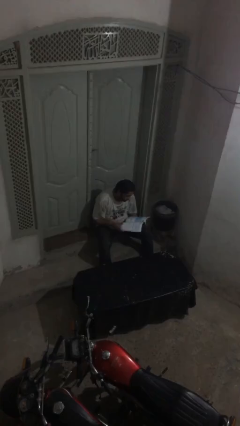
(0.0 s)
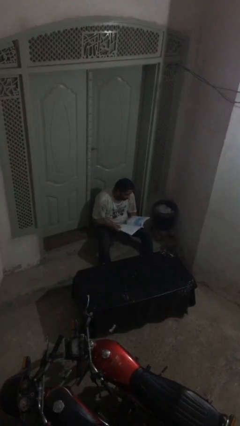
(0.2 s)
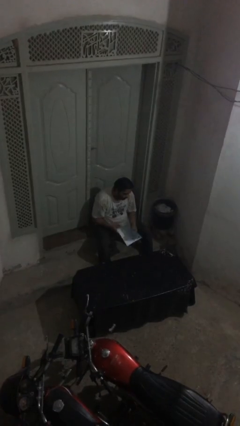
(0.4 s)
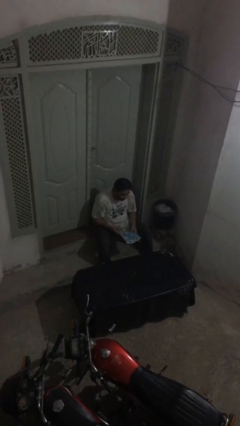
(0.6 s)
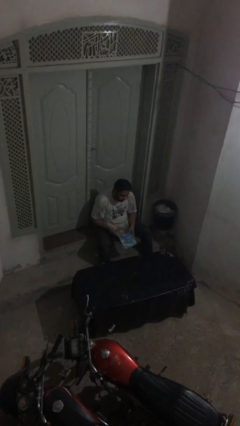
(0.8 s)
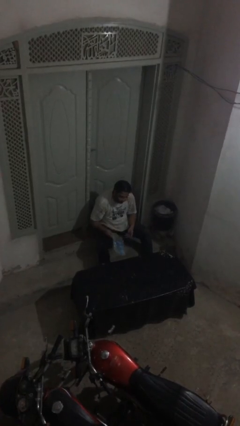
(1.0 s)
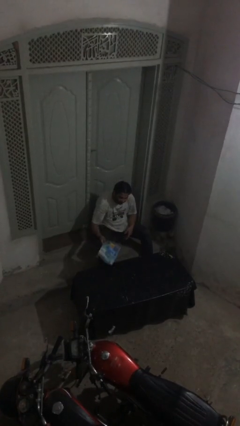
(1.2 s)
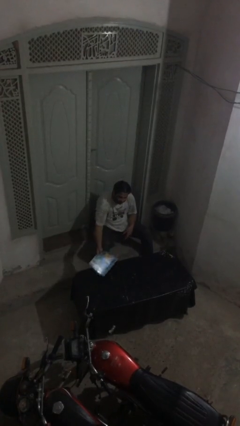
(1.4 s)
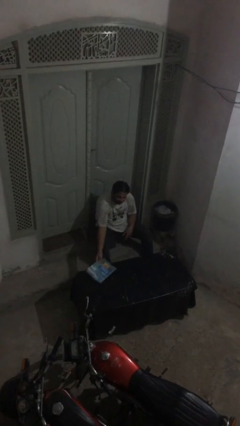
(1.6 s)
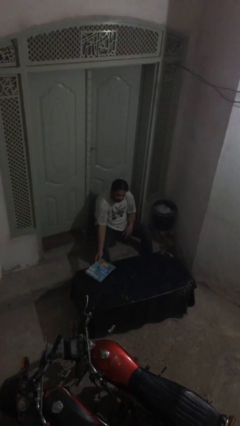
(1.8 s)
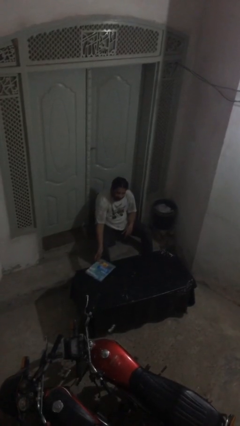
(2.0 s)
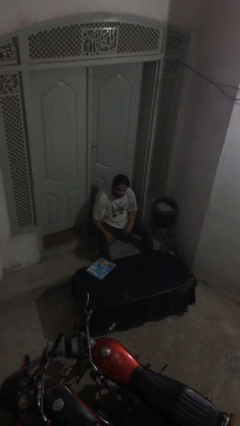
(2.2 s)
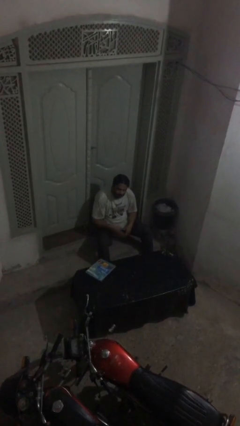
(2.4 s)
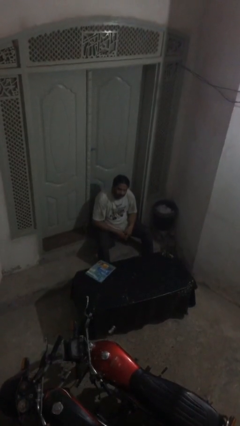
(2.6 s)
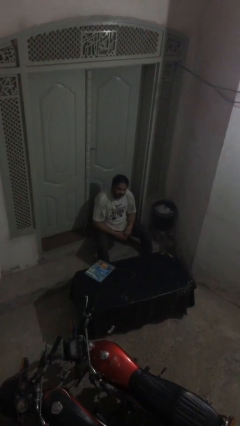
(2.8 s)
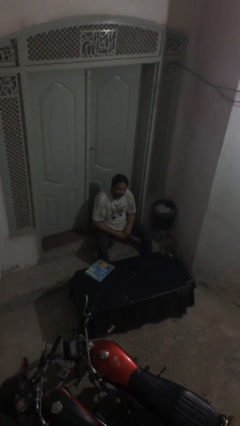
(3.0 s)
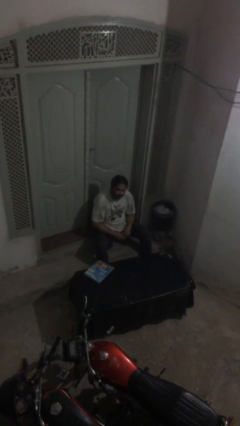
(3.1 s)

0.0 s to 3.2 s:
person puts down object on table

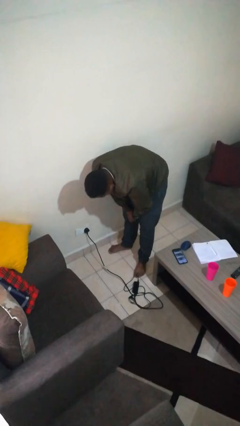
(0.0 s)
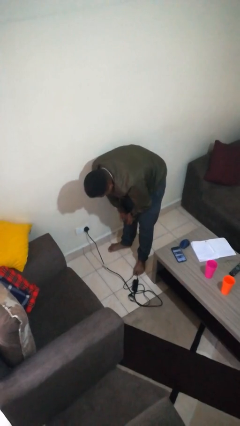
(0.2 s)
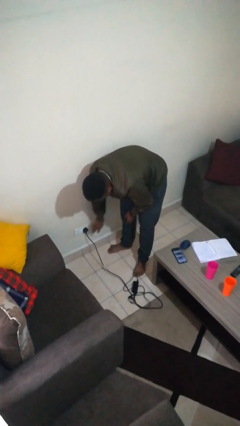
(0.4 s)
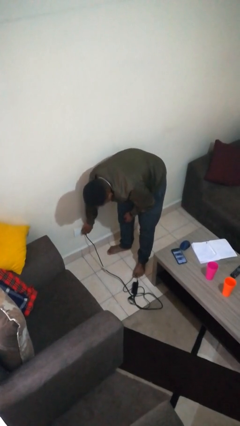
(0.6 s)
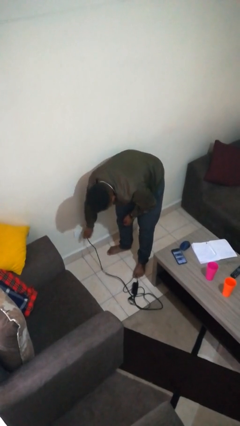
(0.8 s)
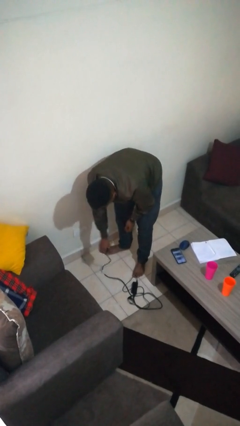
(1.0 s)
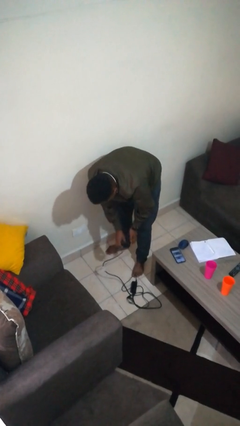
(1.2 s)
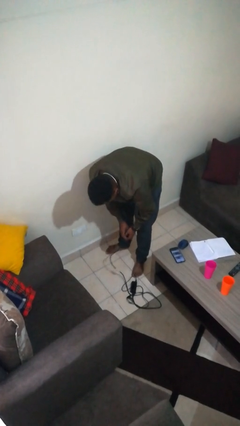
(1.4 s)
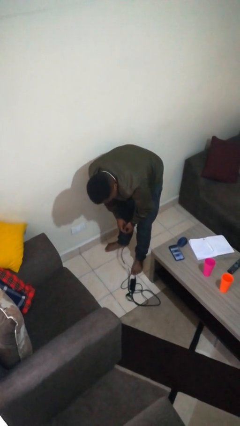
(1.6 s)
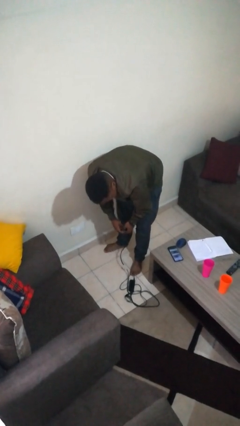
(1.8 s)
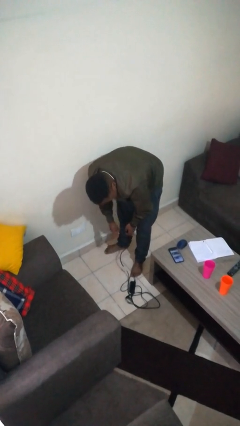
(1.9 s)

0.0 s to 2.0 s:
person unplugs from electrical socket

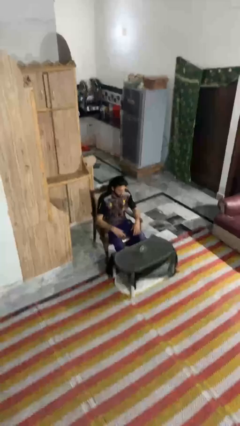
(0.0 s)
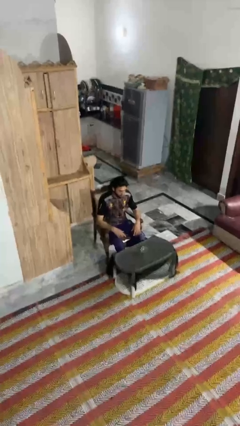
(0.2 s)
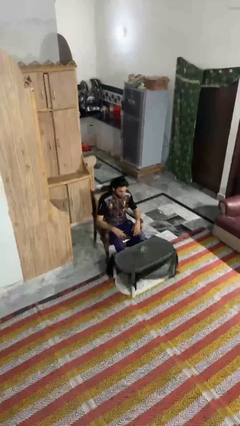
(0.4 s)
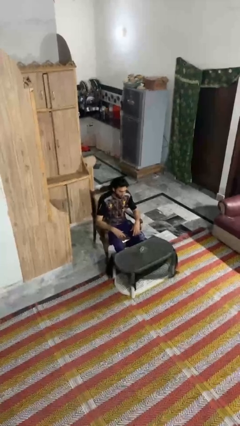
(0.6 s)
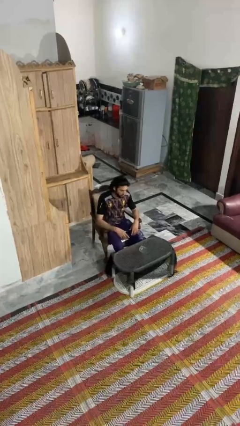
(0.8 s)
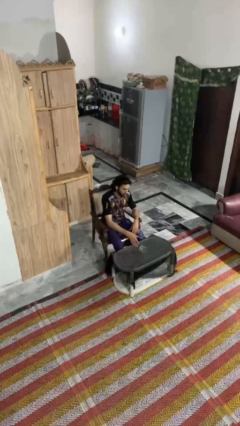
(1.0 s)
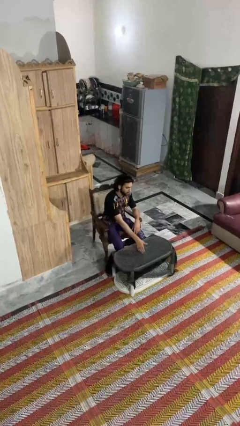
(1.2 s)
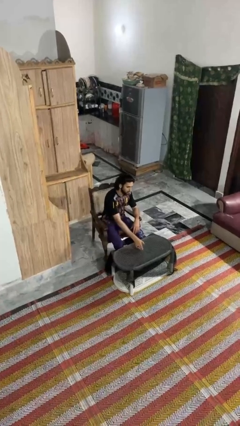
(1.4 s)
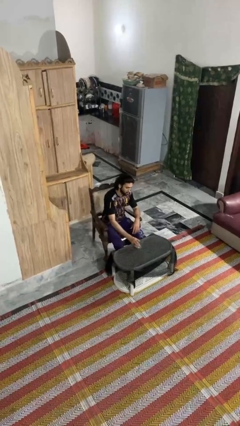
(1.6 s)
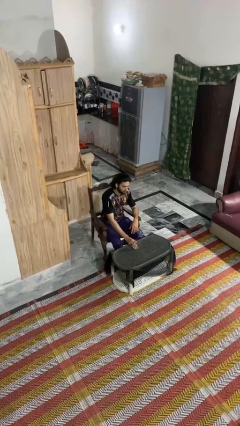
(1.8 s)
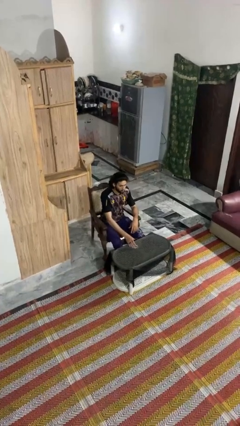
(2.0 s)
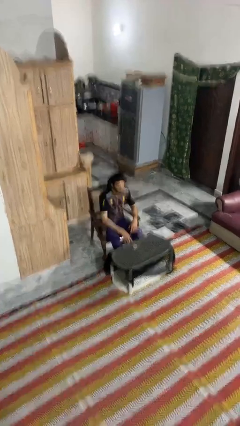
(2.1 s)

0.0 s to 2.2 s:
person sets upright glass

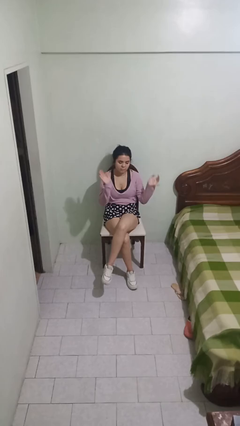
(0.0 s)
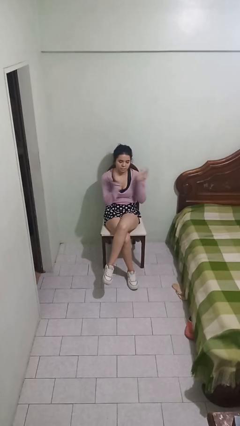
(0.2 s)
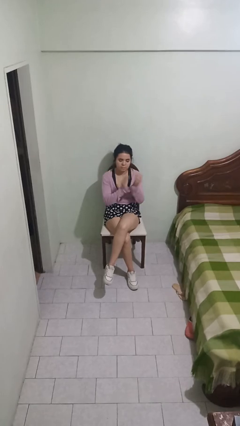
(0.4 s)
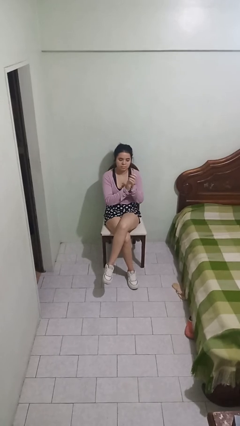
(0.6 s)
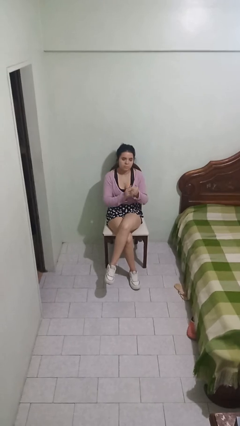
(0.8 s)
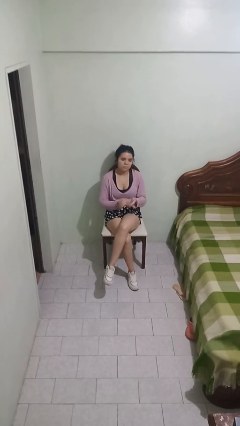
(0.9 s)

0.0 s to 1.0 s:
person claps hands

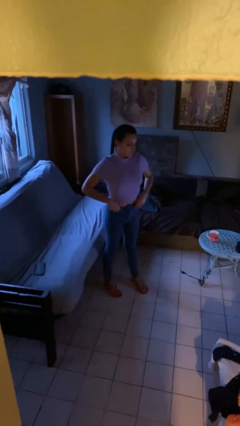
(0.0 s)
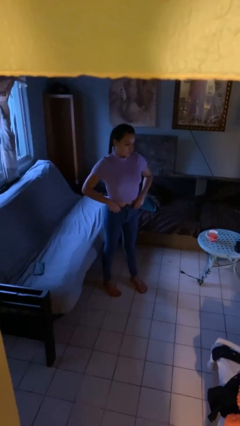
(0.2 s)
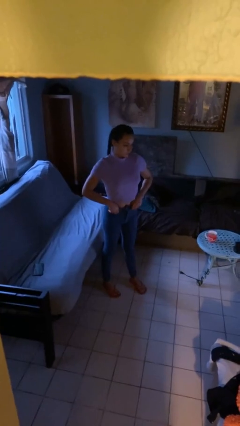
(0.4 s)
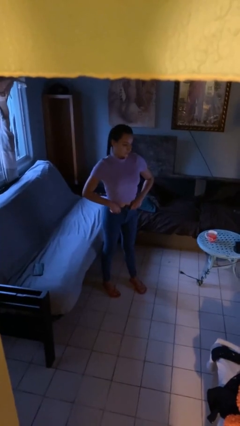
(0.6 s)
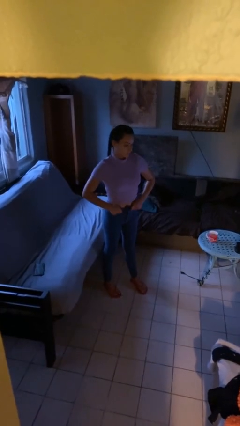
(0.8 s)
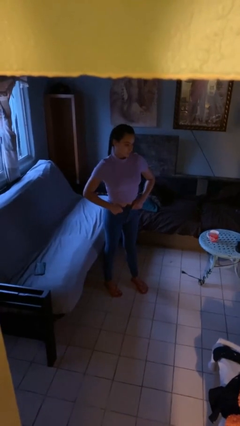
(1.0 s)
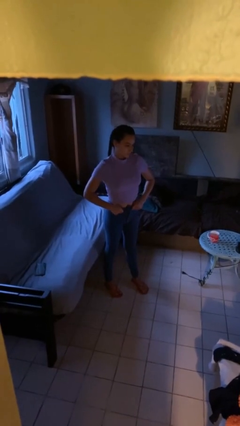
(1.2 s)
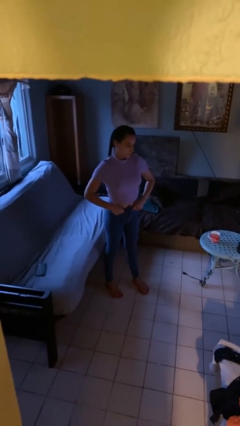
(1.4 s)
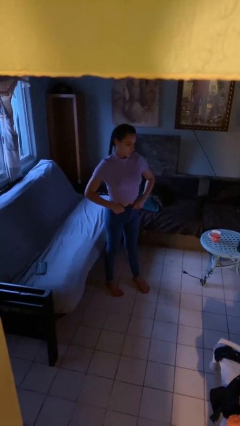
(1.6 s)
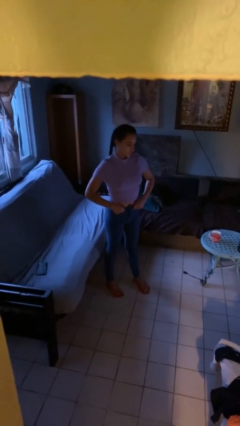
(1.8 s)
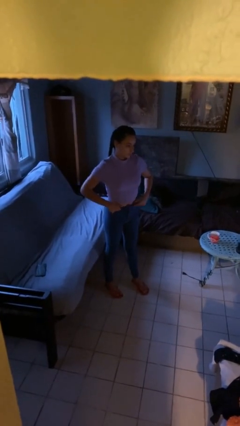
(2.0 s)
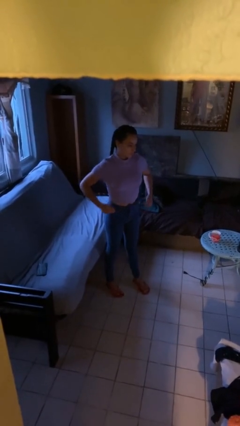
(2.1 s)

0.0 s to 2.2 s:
person puts hands in back pockets

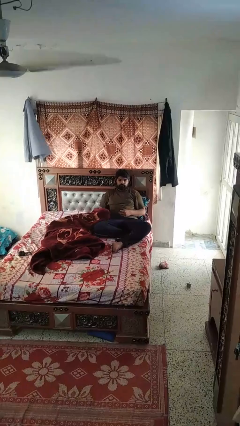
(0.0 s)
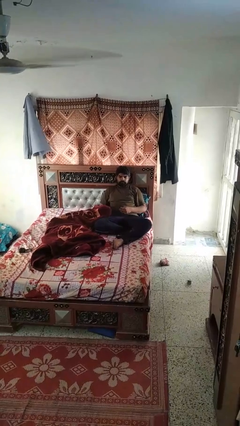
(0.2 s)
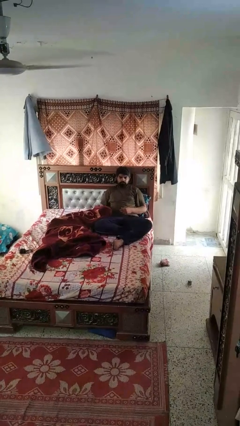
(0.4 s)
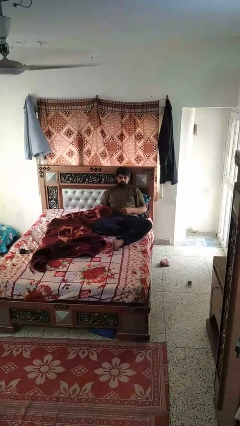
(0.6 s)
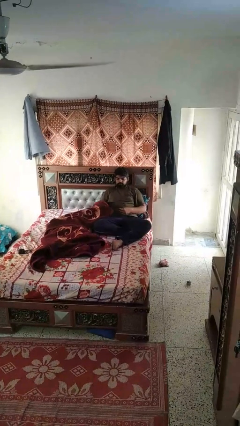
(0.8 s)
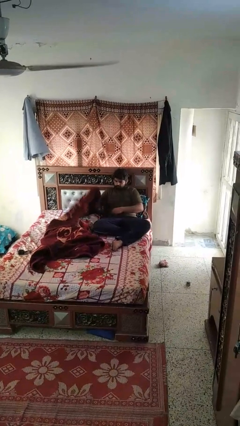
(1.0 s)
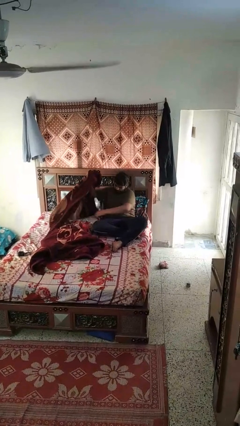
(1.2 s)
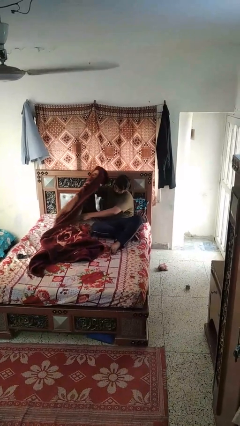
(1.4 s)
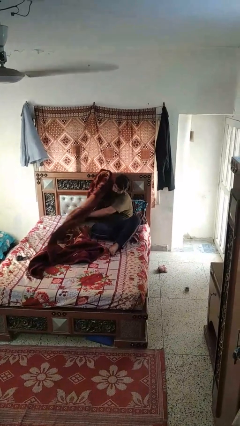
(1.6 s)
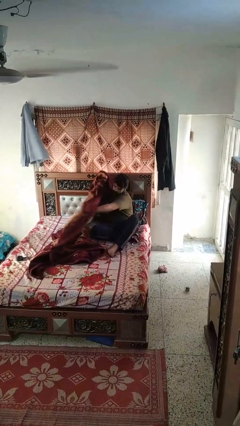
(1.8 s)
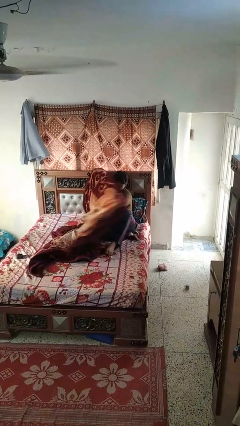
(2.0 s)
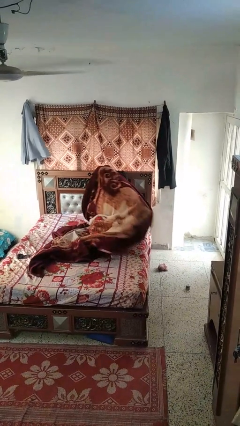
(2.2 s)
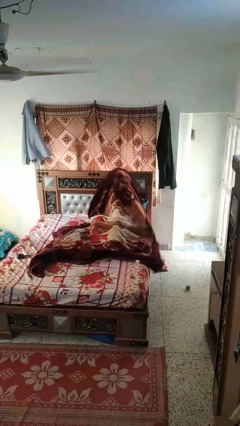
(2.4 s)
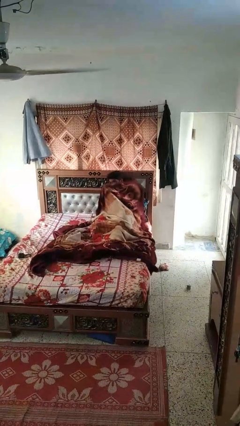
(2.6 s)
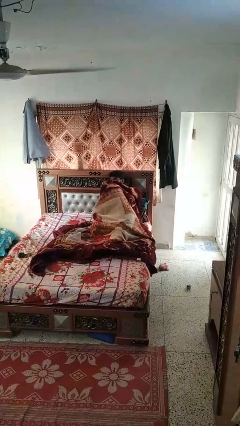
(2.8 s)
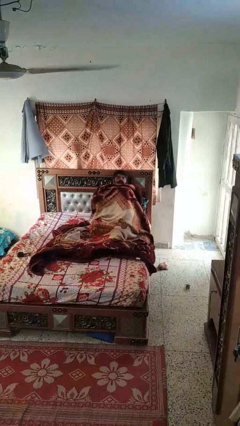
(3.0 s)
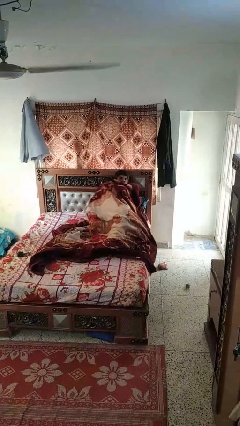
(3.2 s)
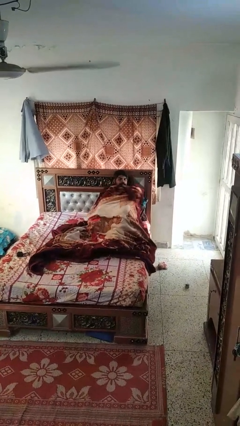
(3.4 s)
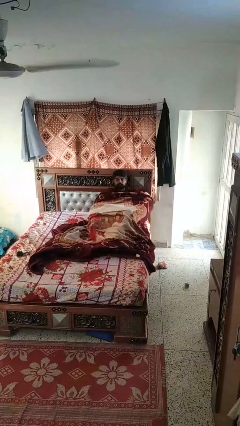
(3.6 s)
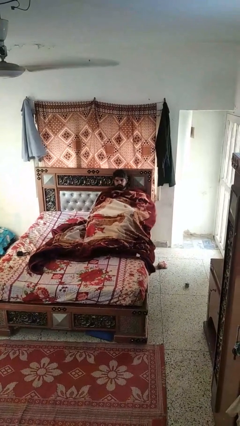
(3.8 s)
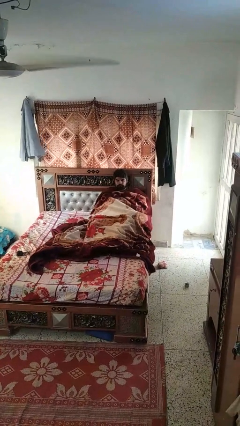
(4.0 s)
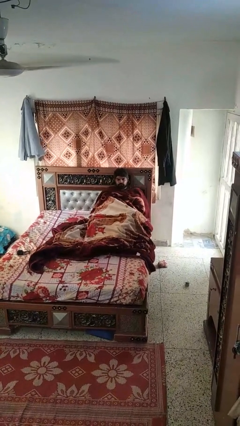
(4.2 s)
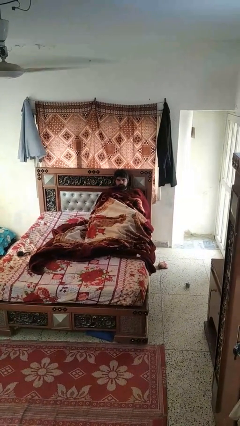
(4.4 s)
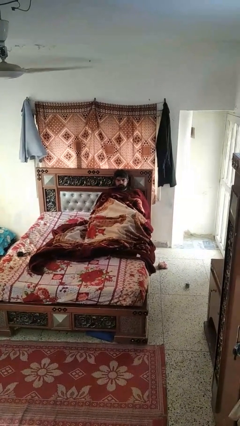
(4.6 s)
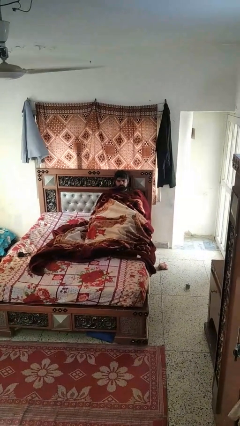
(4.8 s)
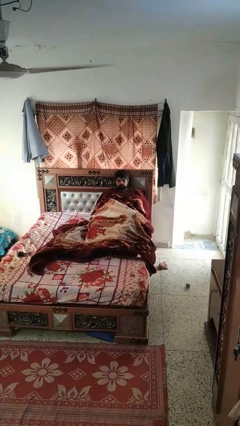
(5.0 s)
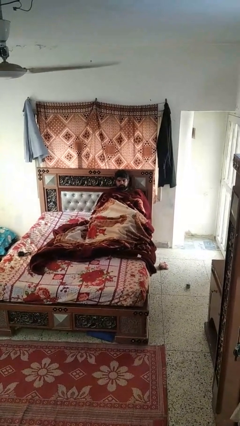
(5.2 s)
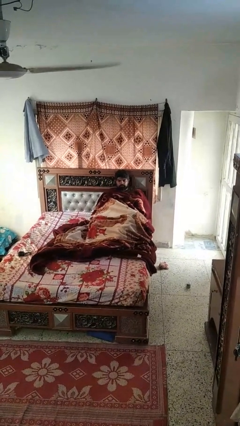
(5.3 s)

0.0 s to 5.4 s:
person covers with blanket

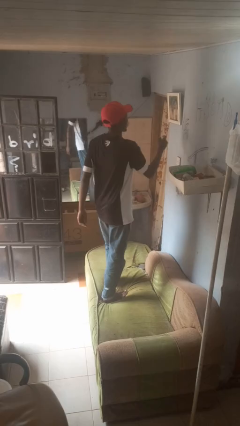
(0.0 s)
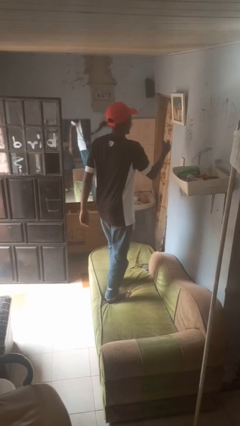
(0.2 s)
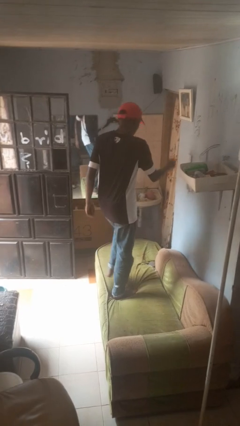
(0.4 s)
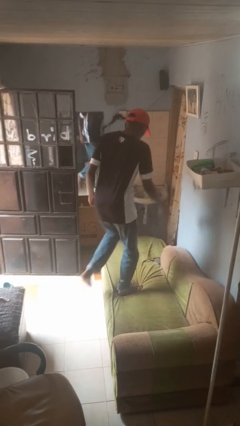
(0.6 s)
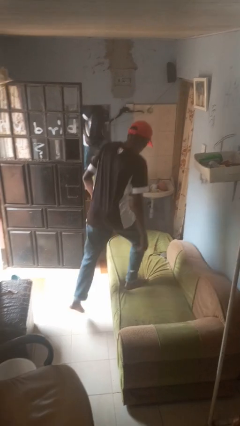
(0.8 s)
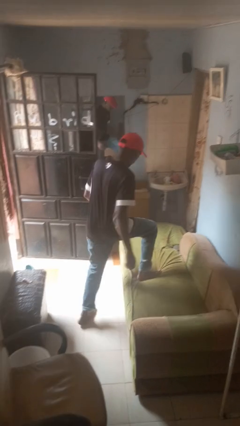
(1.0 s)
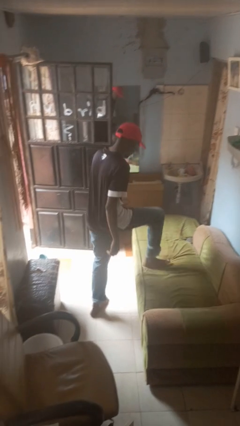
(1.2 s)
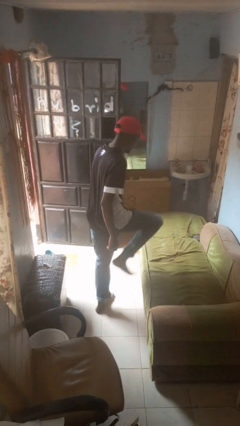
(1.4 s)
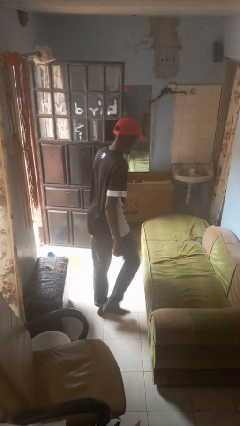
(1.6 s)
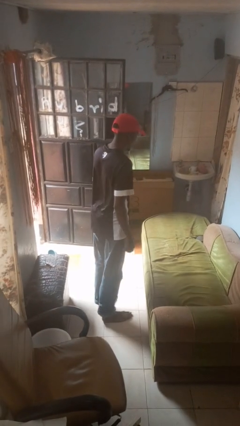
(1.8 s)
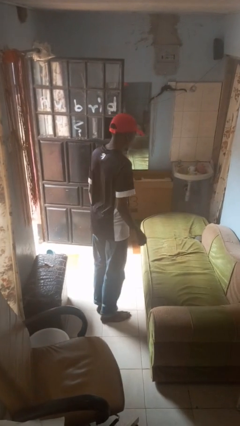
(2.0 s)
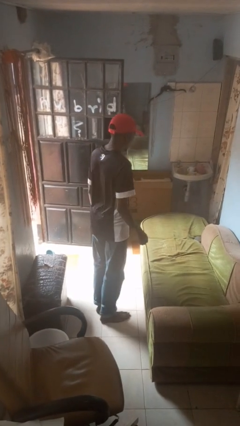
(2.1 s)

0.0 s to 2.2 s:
person climbs off couch
